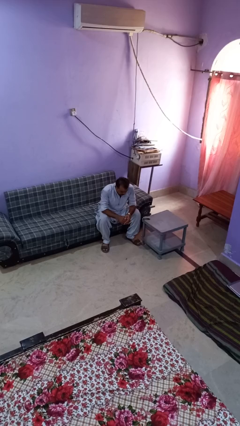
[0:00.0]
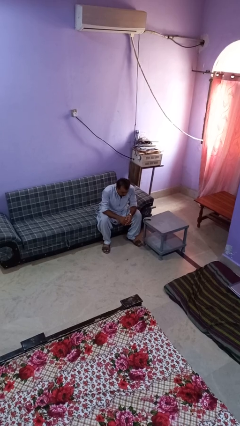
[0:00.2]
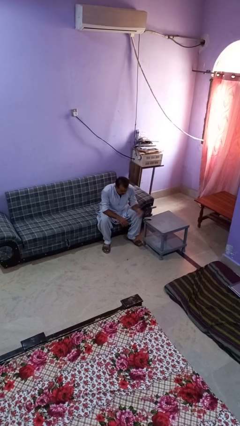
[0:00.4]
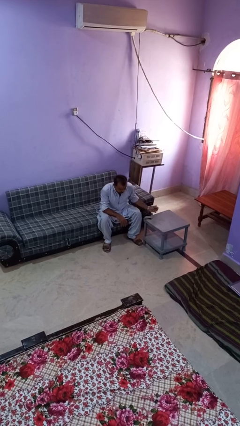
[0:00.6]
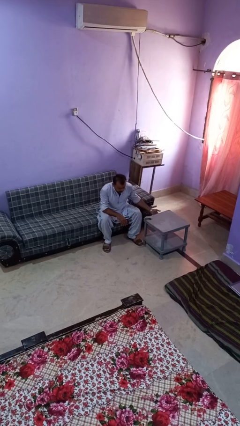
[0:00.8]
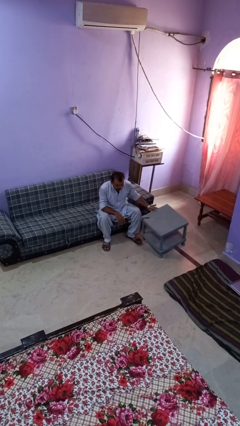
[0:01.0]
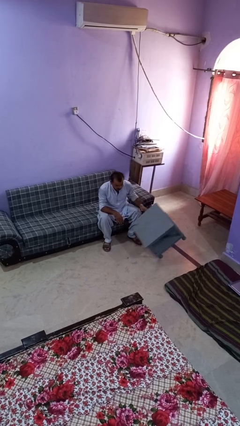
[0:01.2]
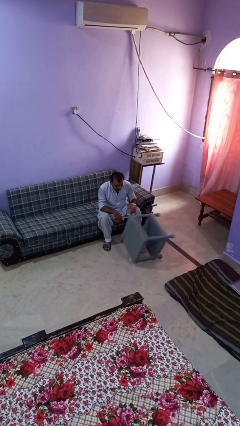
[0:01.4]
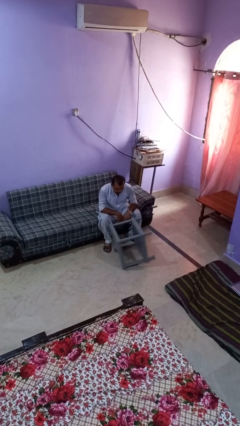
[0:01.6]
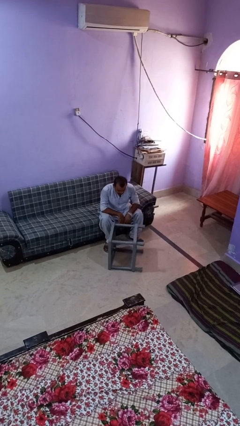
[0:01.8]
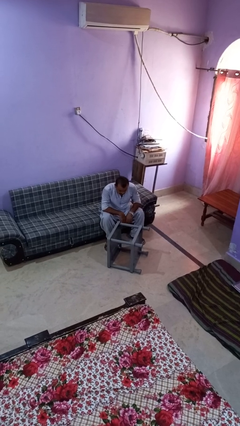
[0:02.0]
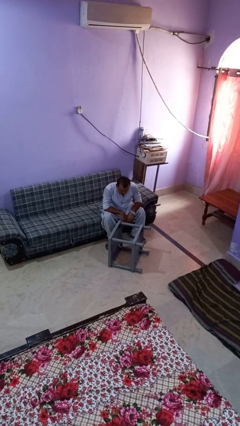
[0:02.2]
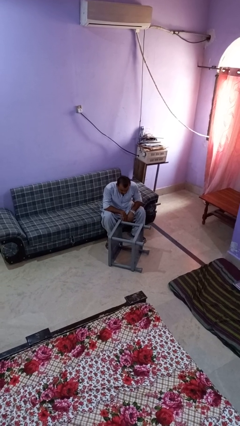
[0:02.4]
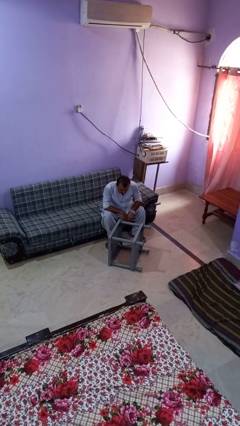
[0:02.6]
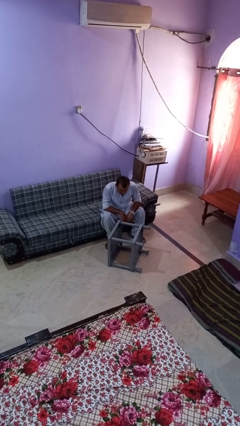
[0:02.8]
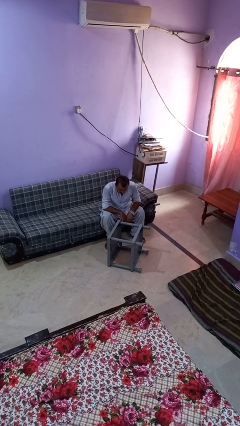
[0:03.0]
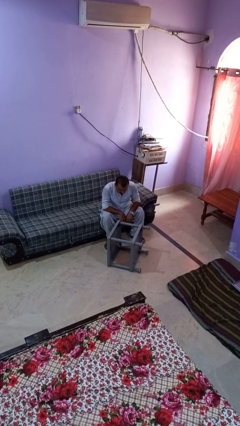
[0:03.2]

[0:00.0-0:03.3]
person knocks over furniture

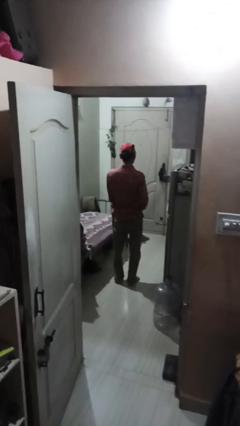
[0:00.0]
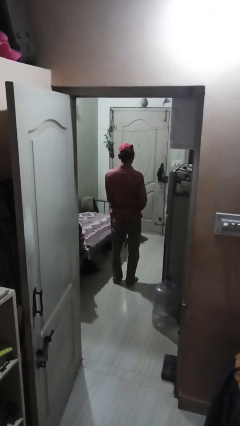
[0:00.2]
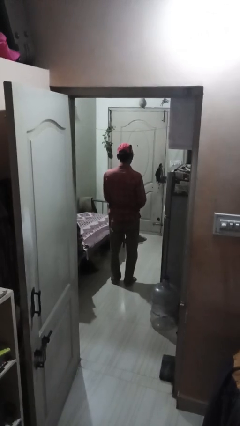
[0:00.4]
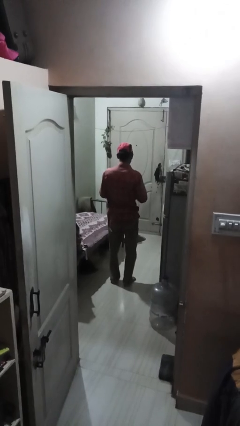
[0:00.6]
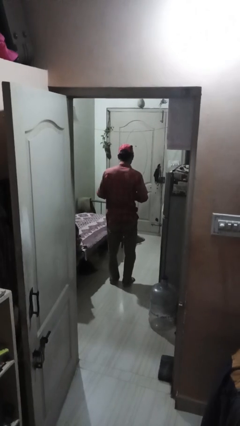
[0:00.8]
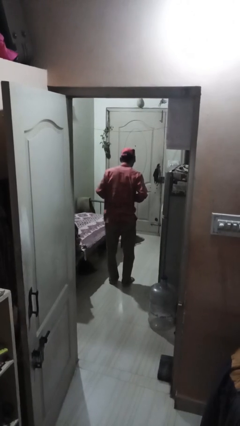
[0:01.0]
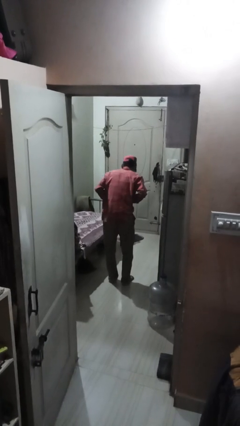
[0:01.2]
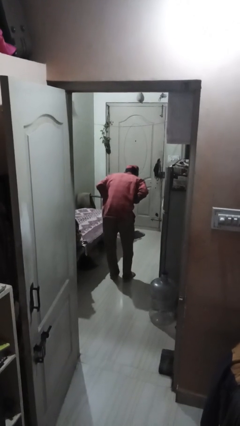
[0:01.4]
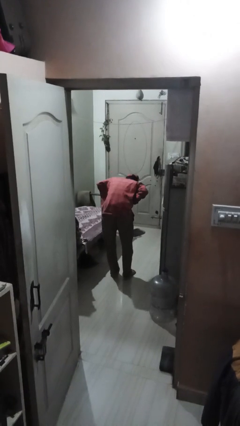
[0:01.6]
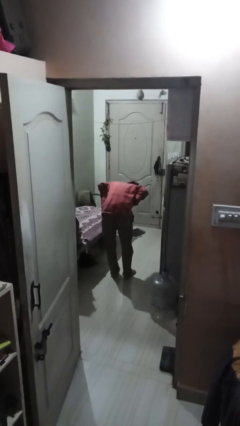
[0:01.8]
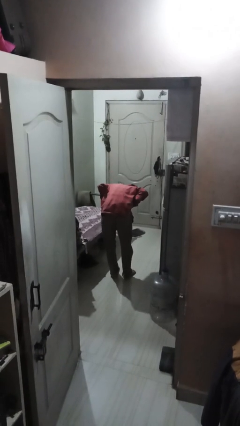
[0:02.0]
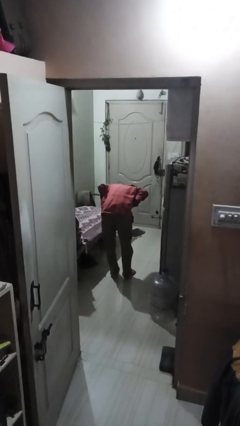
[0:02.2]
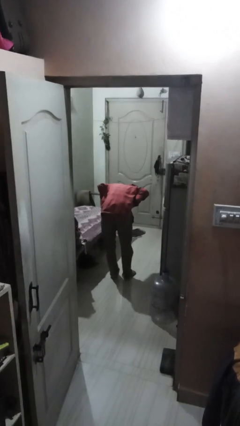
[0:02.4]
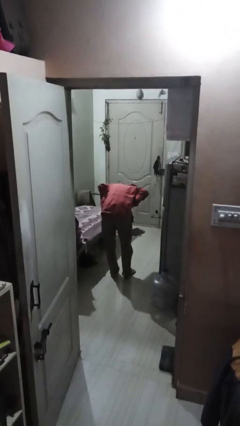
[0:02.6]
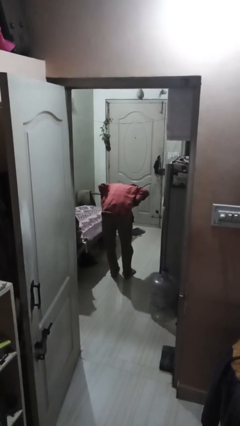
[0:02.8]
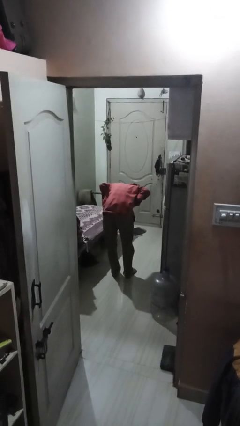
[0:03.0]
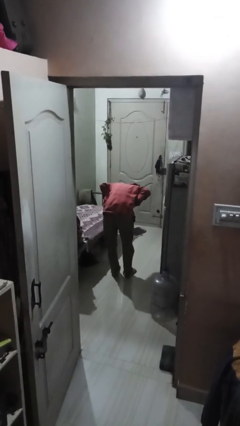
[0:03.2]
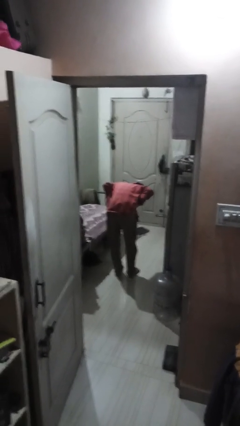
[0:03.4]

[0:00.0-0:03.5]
person bows

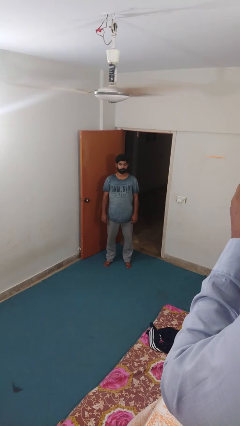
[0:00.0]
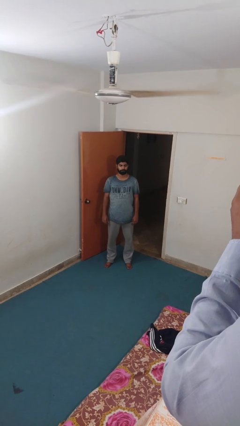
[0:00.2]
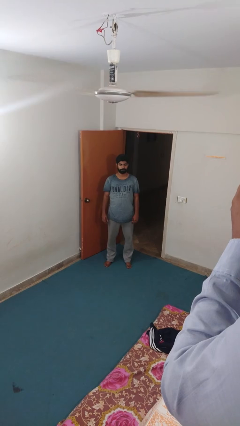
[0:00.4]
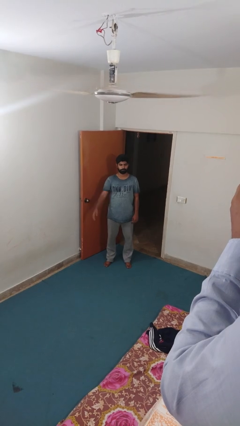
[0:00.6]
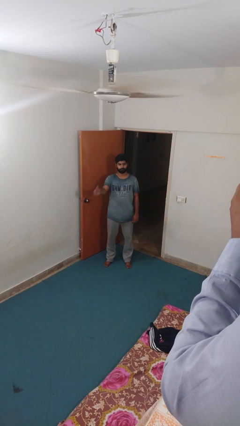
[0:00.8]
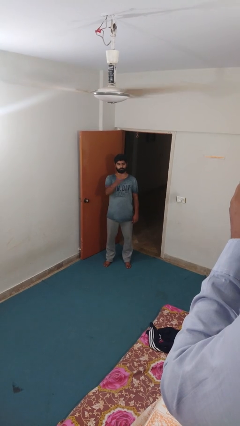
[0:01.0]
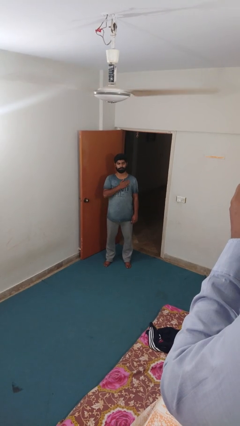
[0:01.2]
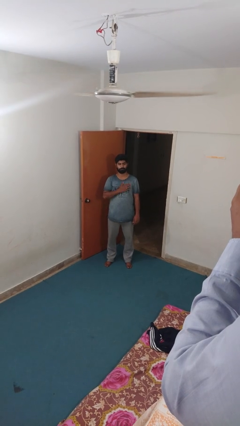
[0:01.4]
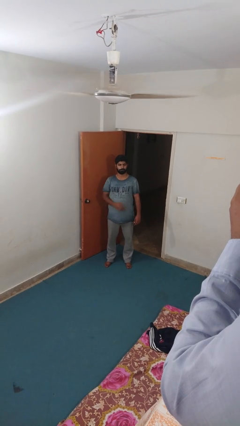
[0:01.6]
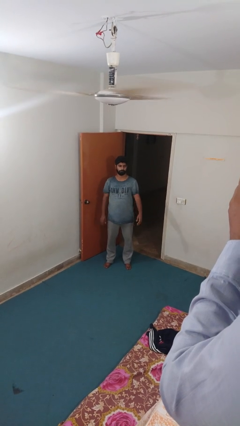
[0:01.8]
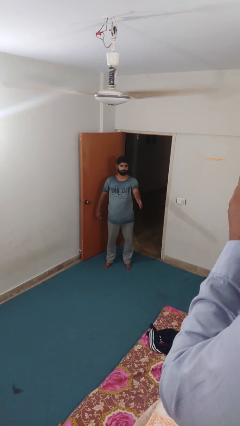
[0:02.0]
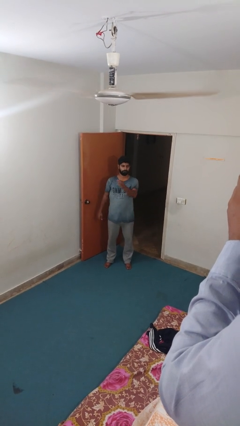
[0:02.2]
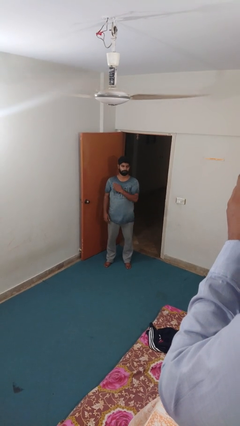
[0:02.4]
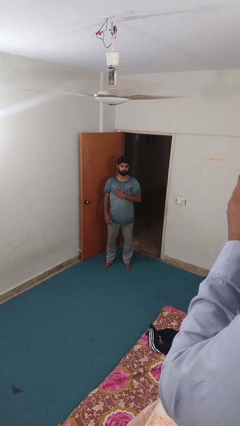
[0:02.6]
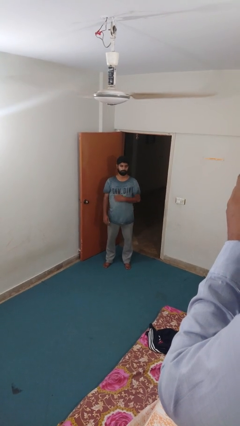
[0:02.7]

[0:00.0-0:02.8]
person drums on chest

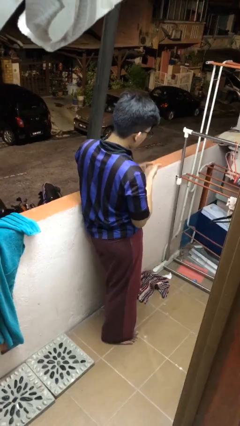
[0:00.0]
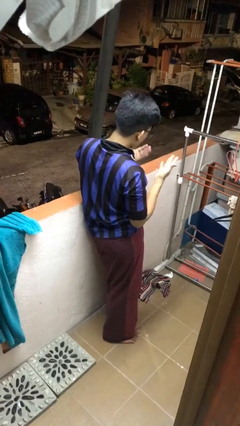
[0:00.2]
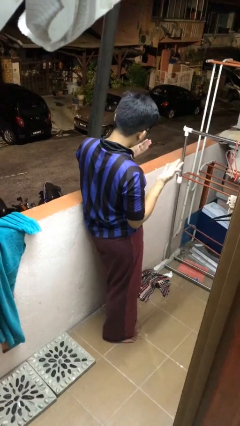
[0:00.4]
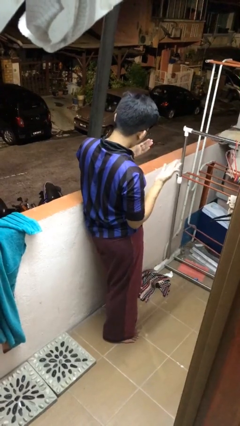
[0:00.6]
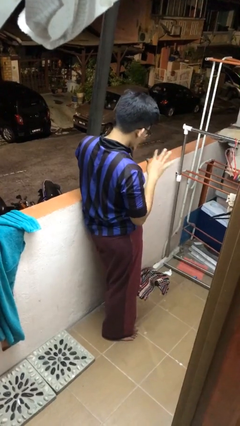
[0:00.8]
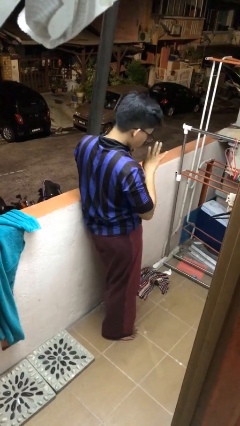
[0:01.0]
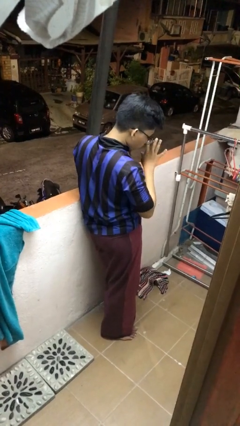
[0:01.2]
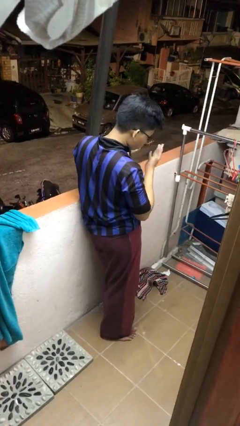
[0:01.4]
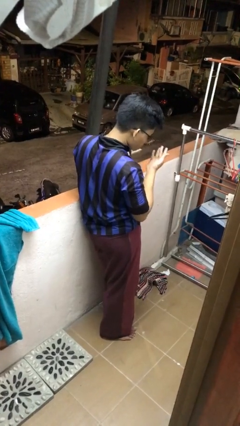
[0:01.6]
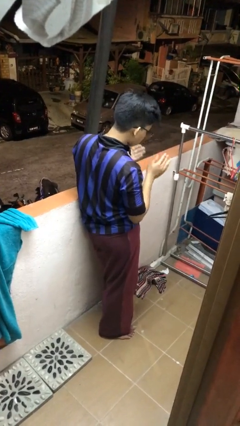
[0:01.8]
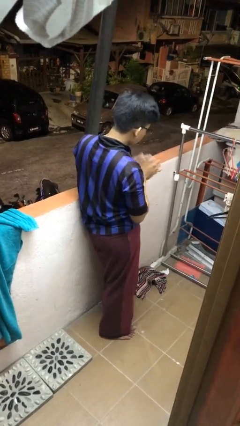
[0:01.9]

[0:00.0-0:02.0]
person blows into hands

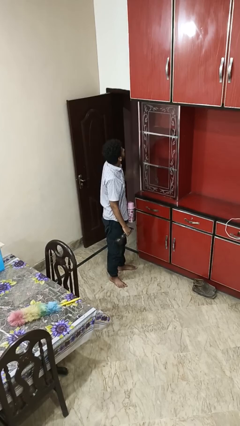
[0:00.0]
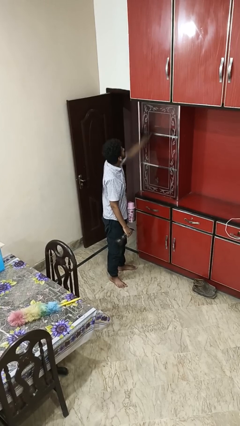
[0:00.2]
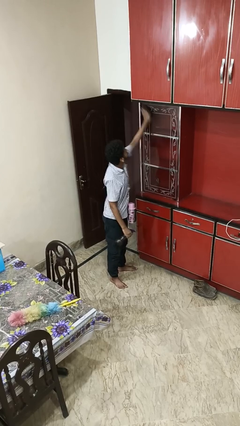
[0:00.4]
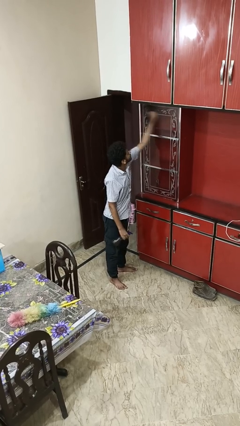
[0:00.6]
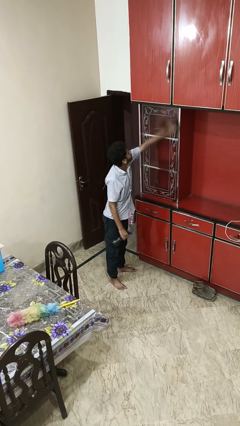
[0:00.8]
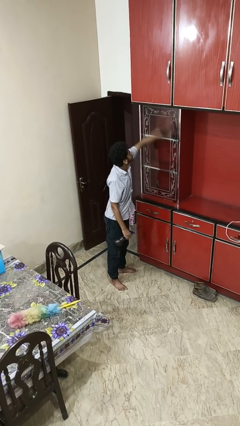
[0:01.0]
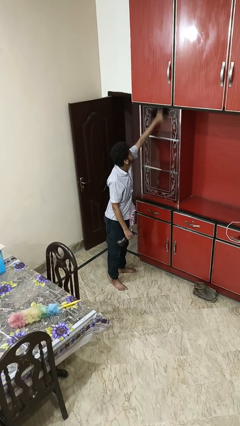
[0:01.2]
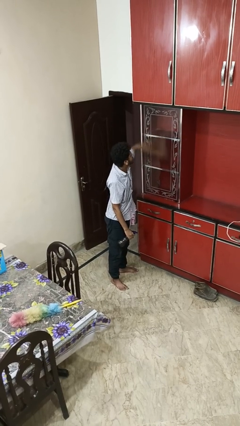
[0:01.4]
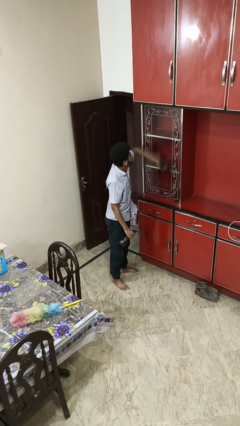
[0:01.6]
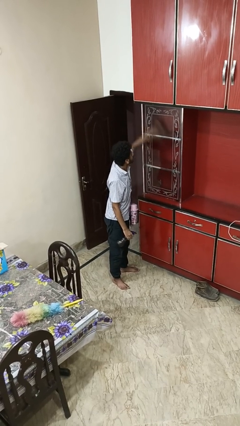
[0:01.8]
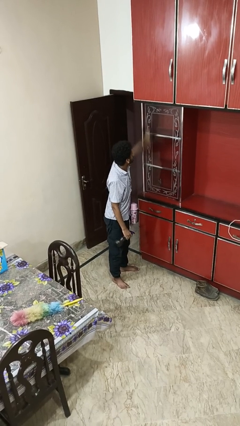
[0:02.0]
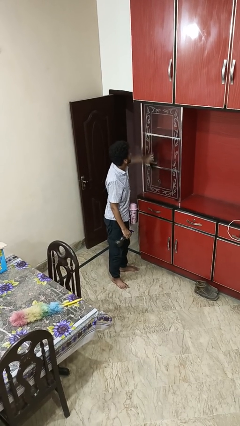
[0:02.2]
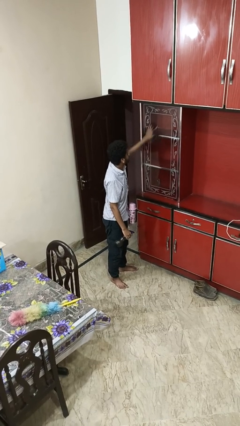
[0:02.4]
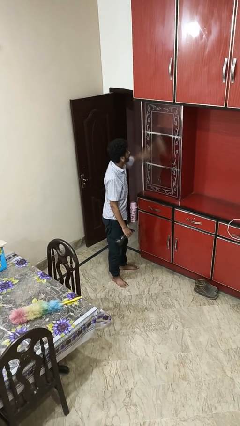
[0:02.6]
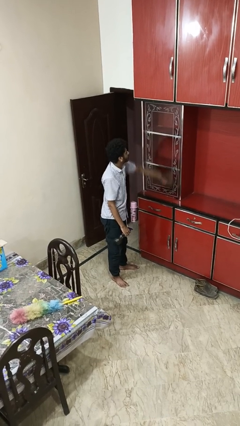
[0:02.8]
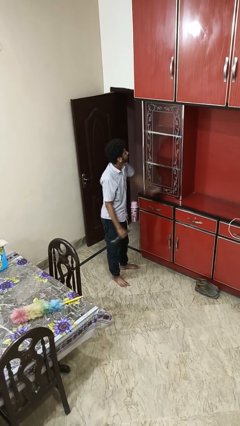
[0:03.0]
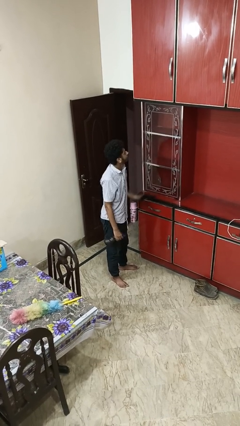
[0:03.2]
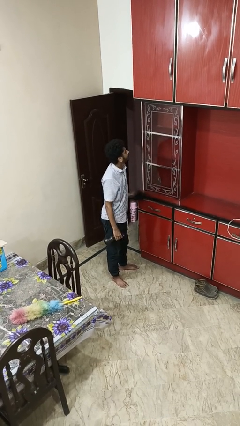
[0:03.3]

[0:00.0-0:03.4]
person washes window

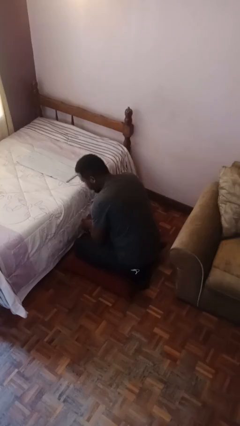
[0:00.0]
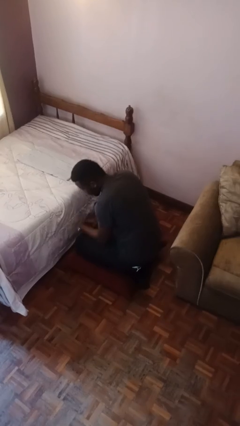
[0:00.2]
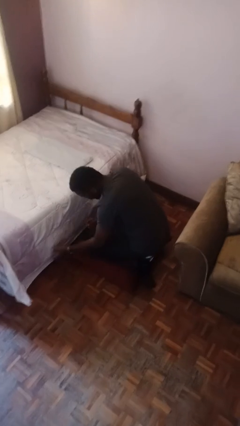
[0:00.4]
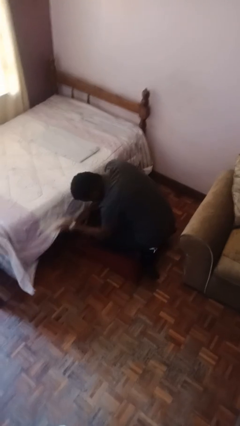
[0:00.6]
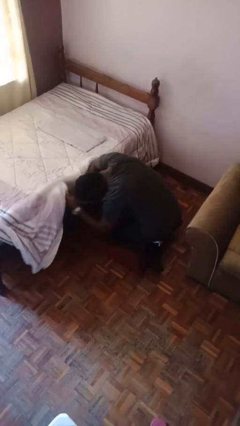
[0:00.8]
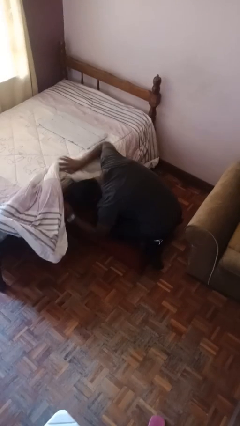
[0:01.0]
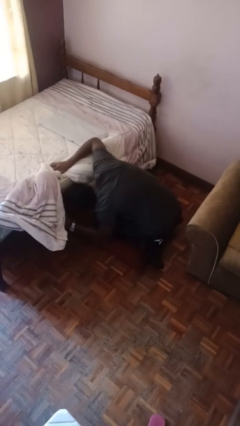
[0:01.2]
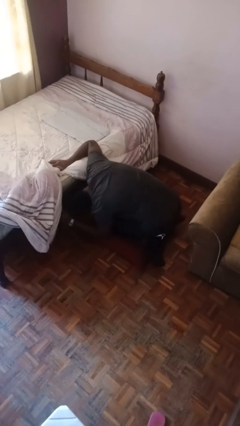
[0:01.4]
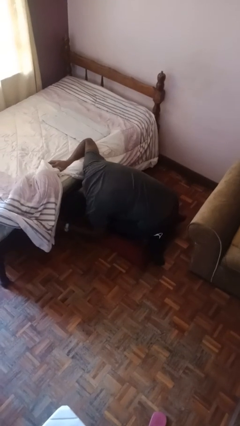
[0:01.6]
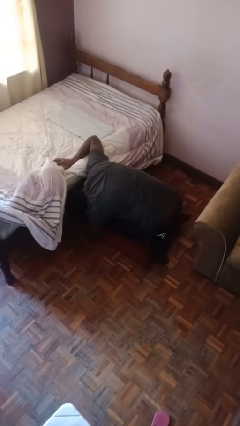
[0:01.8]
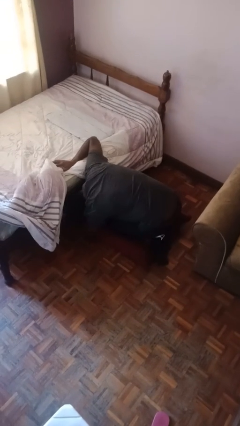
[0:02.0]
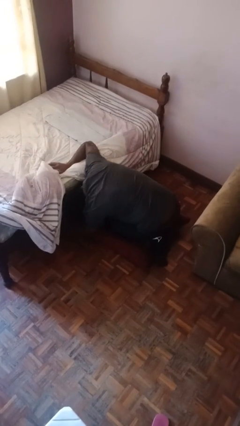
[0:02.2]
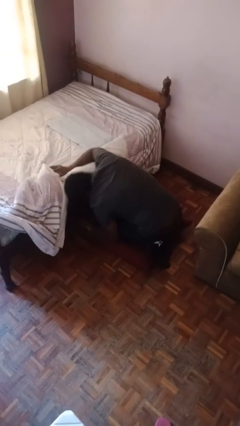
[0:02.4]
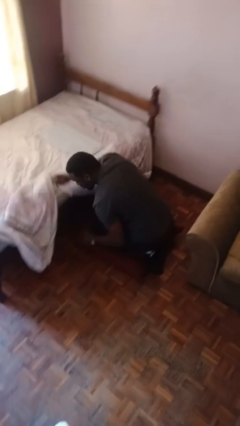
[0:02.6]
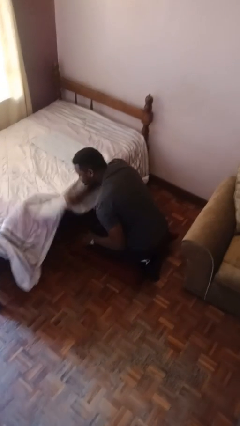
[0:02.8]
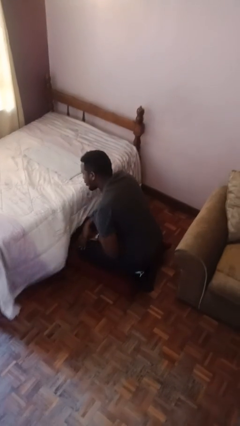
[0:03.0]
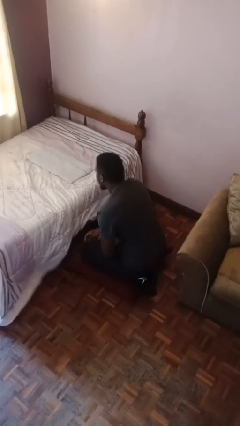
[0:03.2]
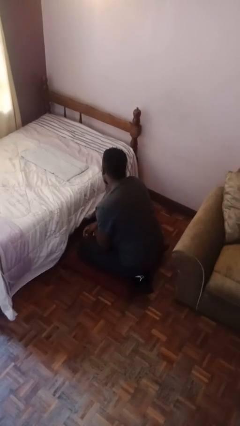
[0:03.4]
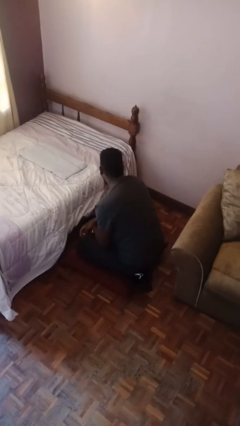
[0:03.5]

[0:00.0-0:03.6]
person searches under bed
